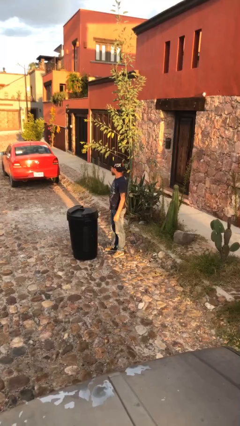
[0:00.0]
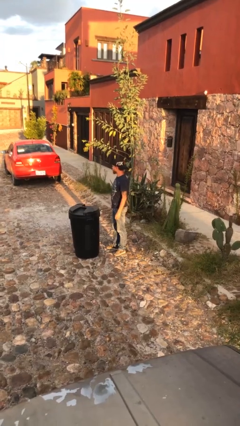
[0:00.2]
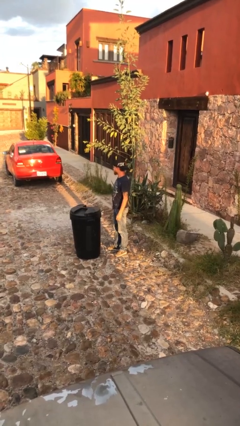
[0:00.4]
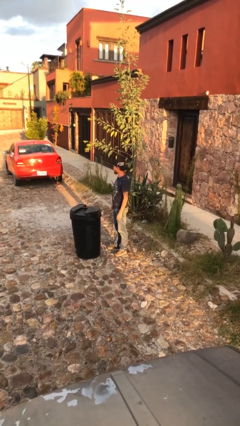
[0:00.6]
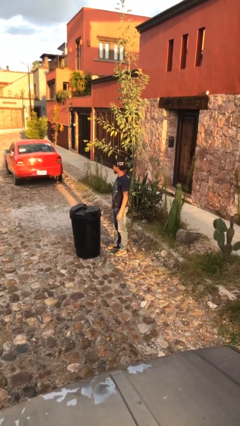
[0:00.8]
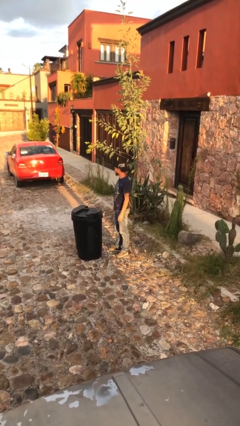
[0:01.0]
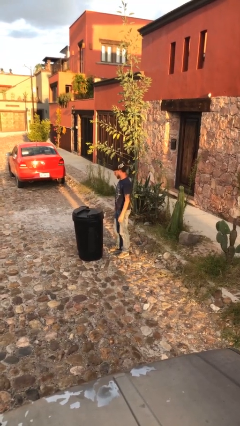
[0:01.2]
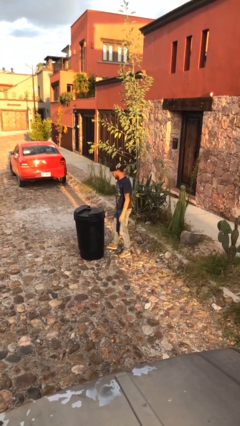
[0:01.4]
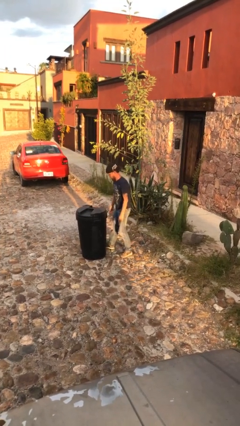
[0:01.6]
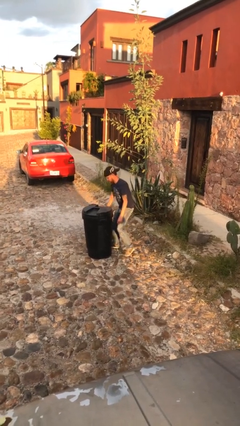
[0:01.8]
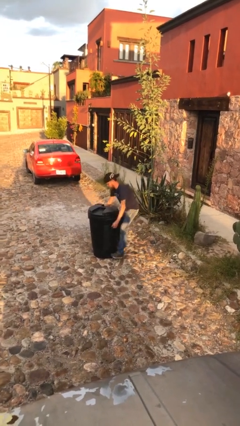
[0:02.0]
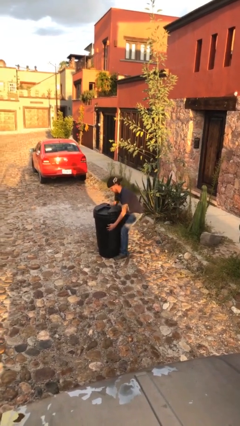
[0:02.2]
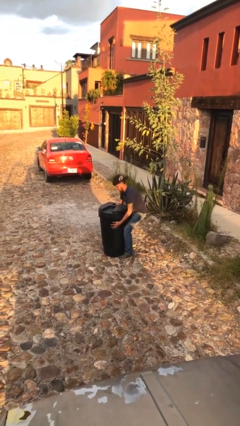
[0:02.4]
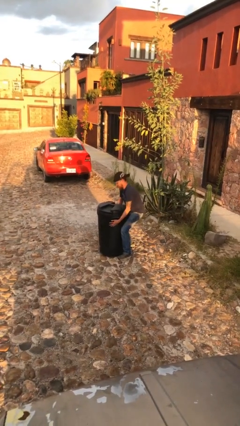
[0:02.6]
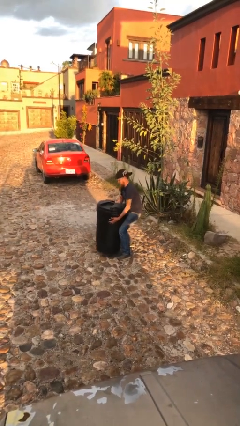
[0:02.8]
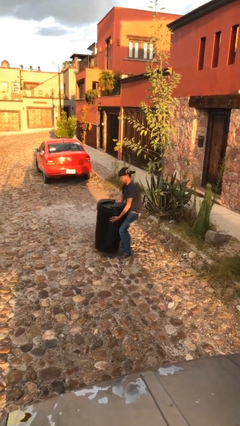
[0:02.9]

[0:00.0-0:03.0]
person picks up object from floor

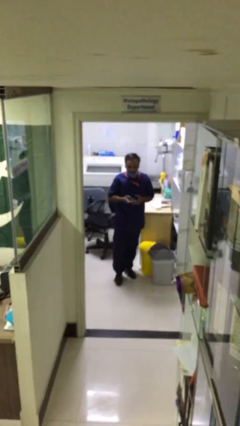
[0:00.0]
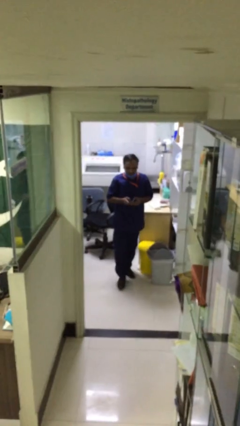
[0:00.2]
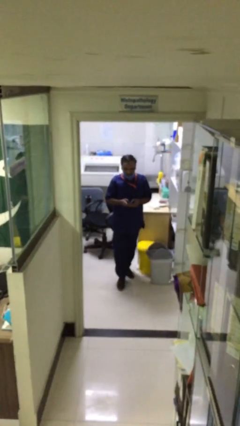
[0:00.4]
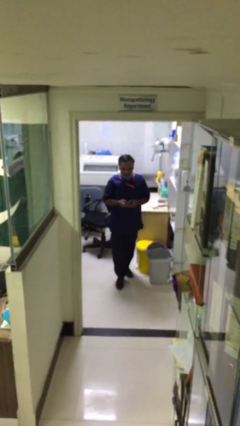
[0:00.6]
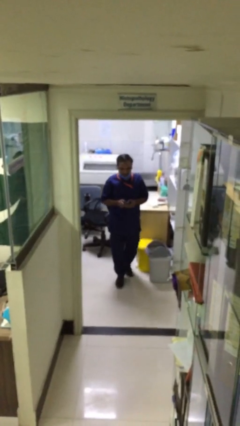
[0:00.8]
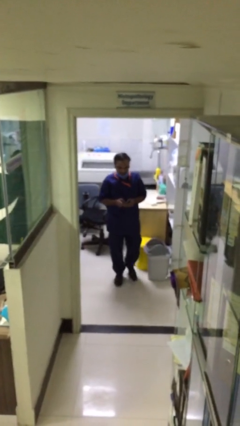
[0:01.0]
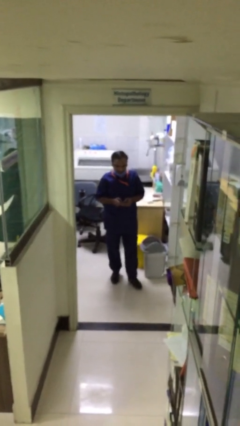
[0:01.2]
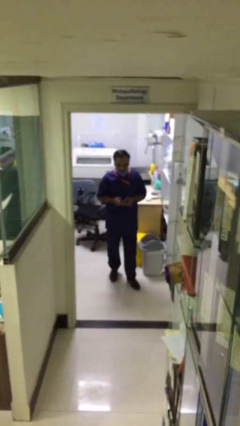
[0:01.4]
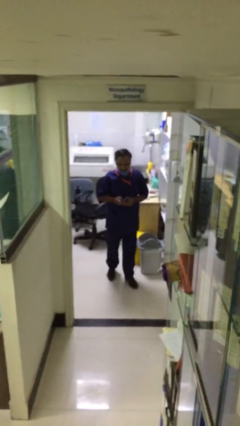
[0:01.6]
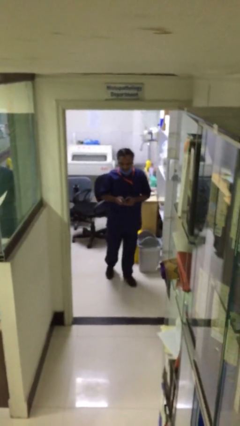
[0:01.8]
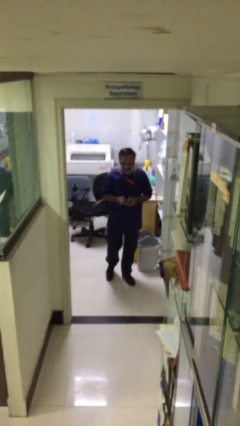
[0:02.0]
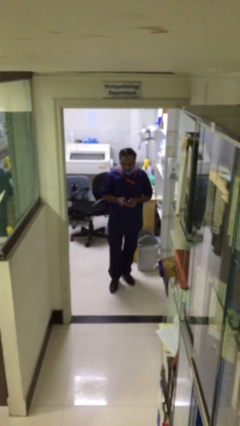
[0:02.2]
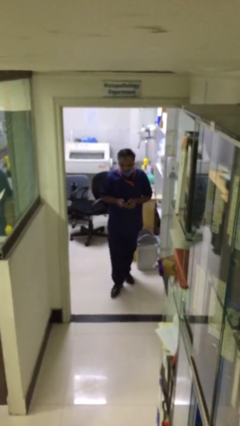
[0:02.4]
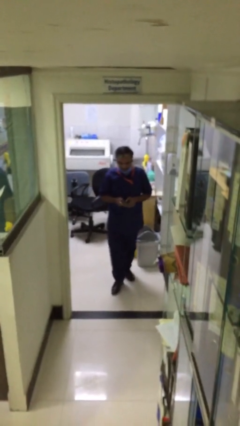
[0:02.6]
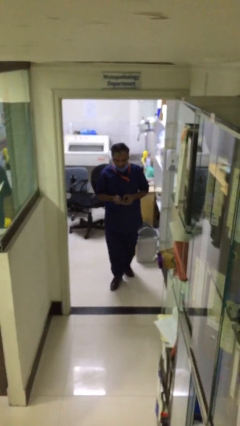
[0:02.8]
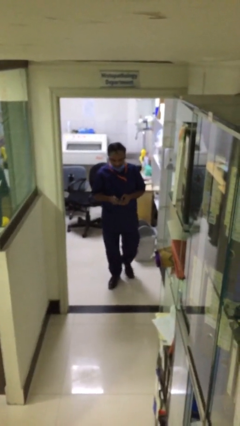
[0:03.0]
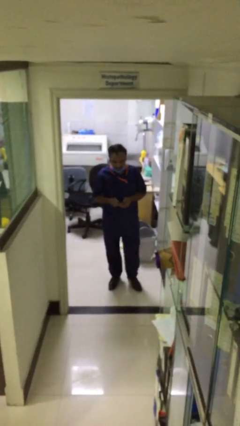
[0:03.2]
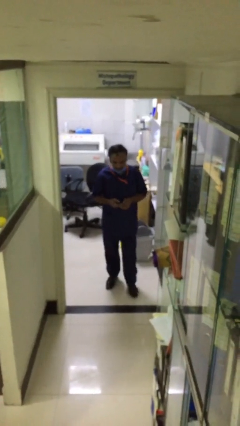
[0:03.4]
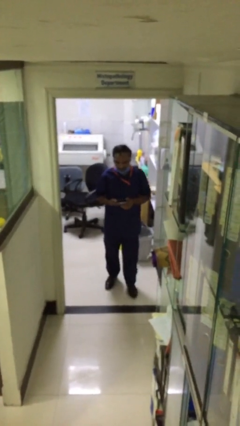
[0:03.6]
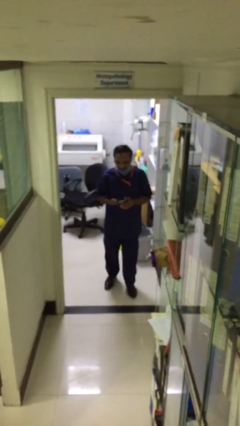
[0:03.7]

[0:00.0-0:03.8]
person texts on phone

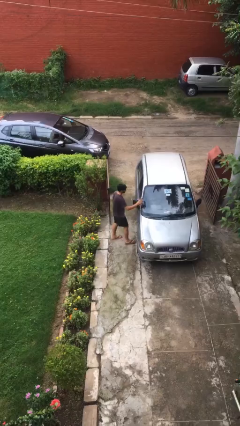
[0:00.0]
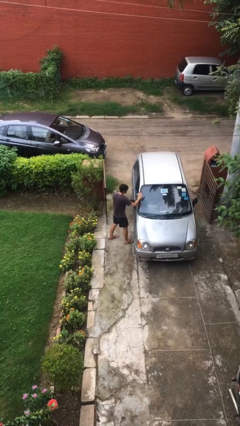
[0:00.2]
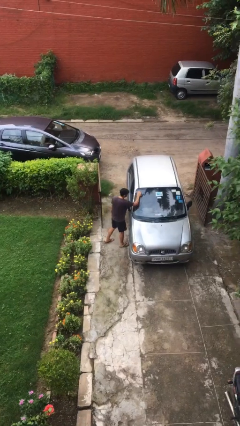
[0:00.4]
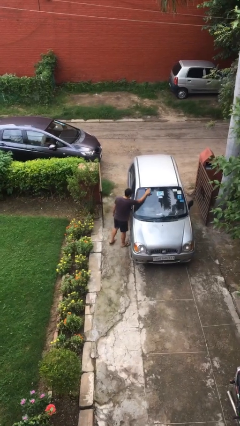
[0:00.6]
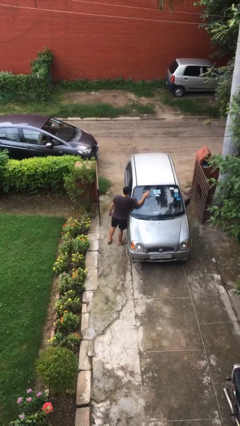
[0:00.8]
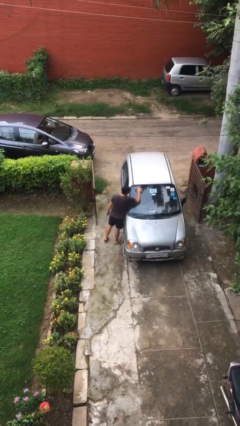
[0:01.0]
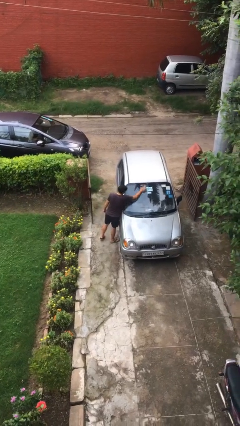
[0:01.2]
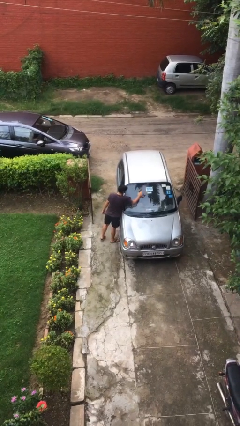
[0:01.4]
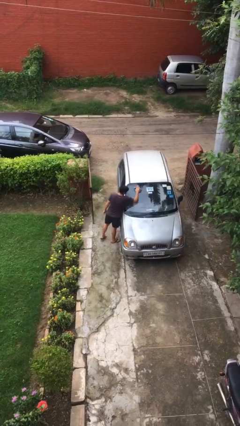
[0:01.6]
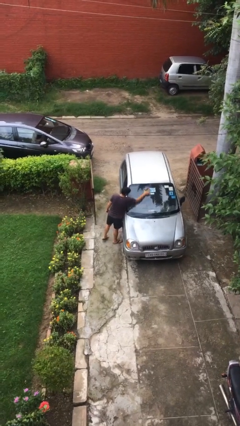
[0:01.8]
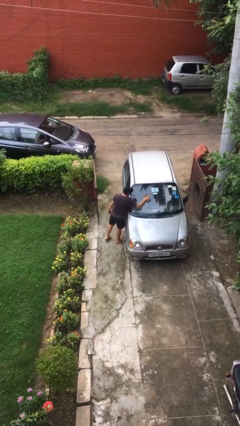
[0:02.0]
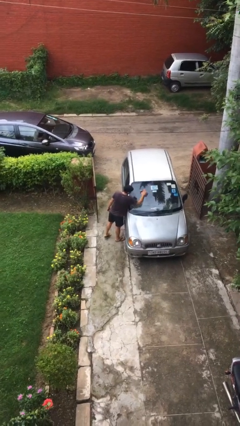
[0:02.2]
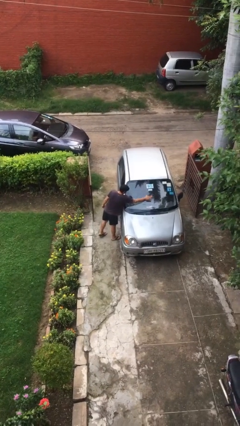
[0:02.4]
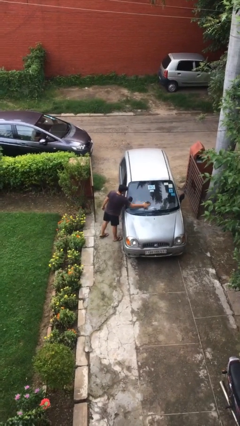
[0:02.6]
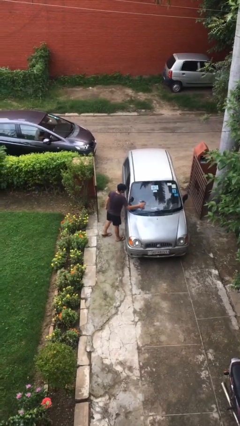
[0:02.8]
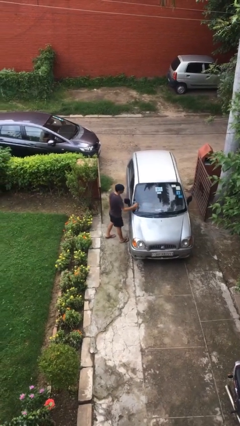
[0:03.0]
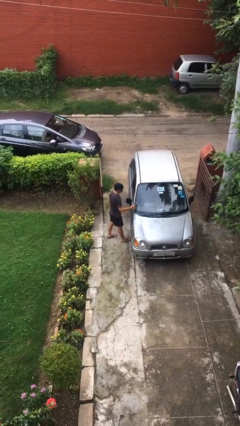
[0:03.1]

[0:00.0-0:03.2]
person polishes car with rag

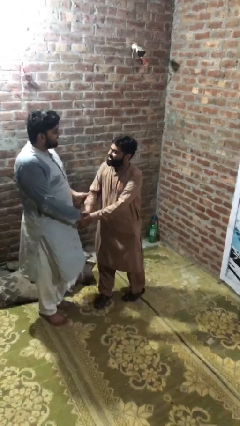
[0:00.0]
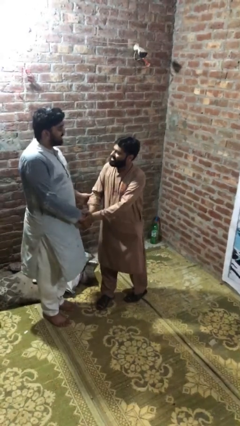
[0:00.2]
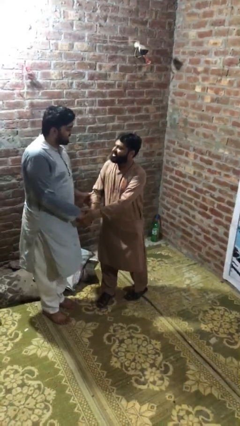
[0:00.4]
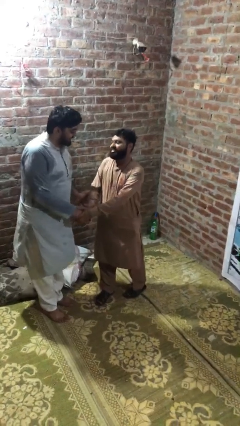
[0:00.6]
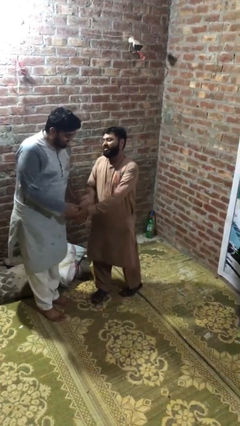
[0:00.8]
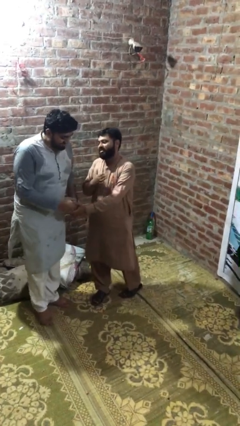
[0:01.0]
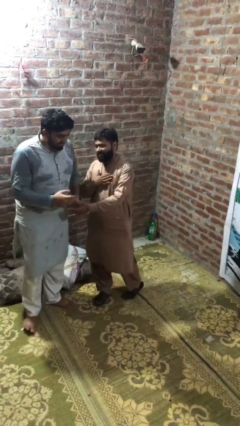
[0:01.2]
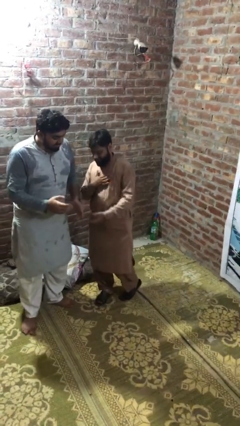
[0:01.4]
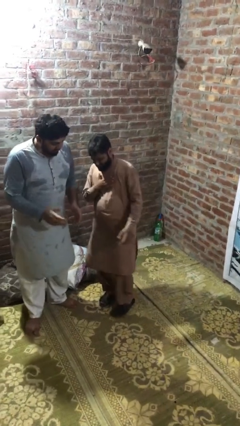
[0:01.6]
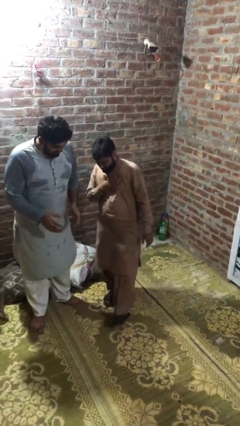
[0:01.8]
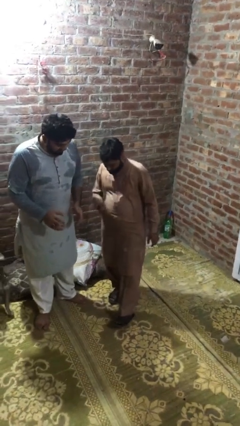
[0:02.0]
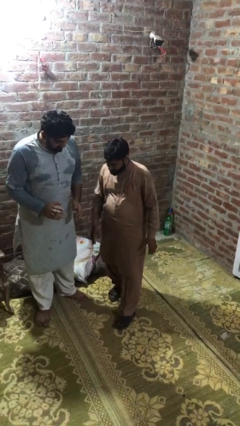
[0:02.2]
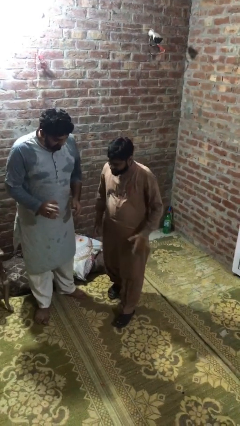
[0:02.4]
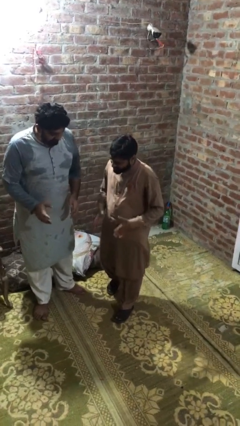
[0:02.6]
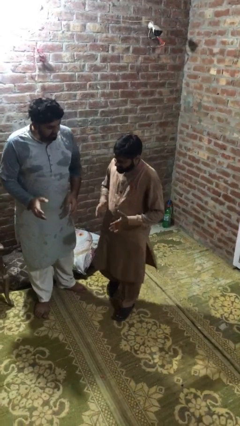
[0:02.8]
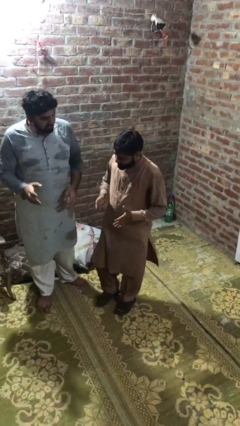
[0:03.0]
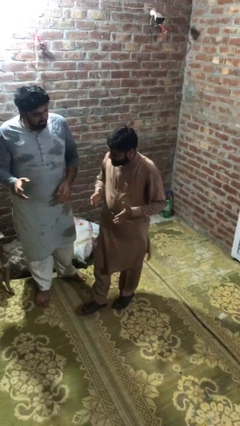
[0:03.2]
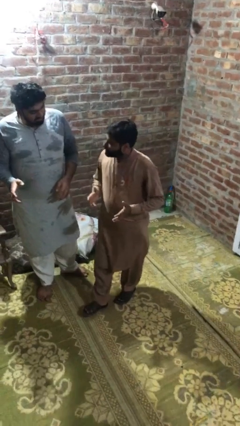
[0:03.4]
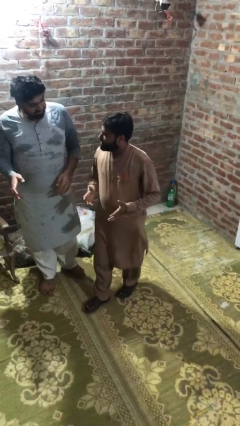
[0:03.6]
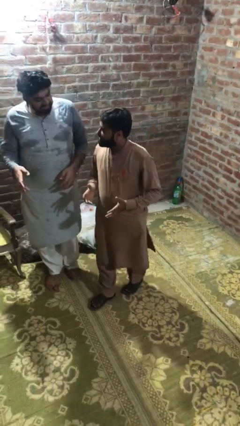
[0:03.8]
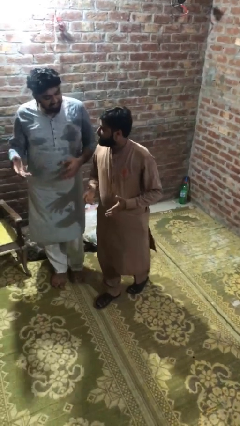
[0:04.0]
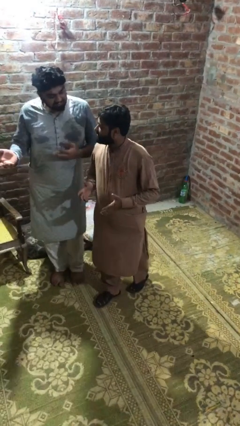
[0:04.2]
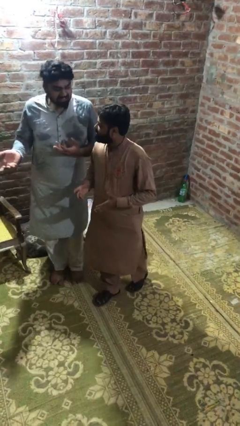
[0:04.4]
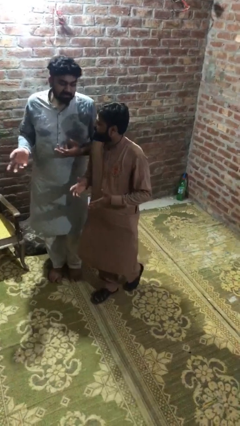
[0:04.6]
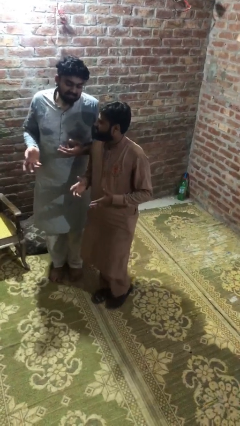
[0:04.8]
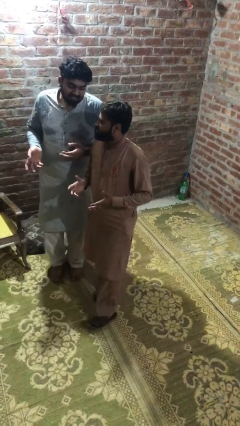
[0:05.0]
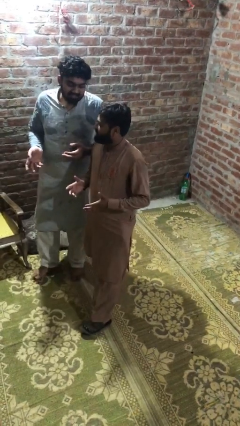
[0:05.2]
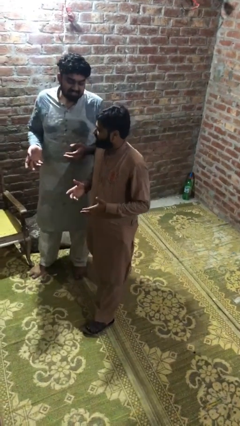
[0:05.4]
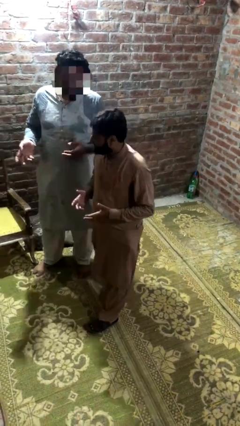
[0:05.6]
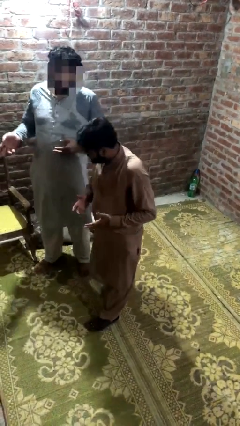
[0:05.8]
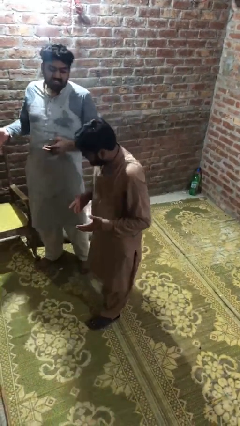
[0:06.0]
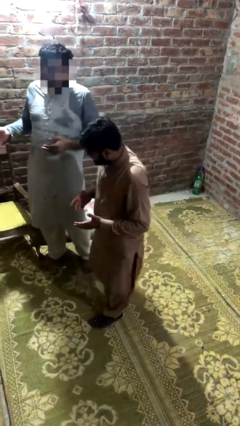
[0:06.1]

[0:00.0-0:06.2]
person talks to person

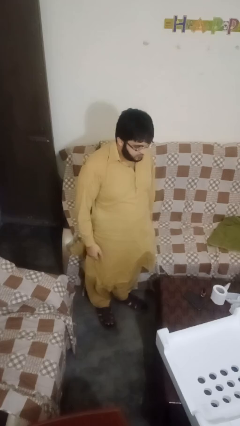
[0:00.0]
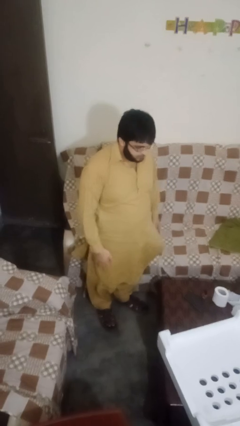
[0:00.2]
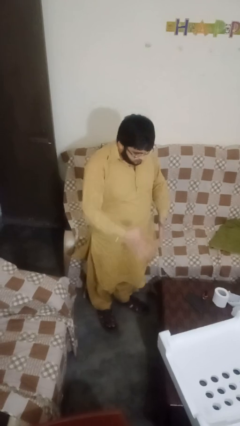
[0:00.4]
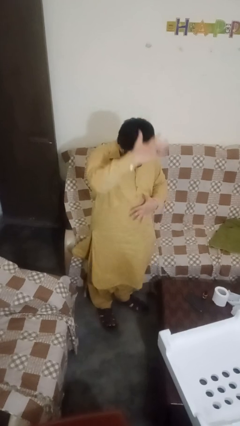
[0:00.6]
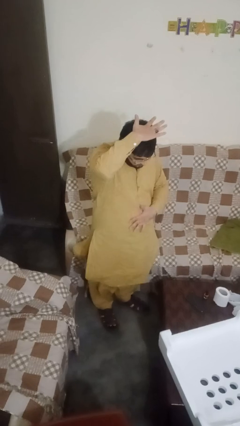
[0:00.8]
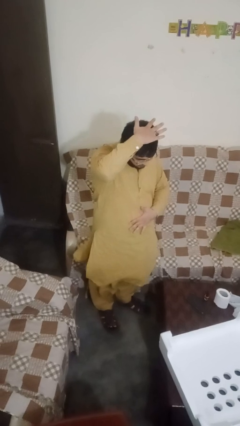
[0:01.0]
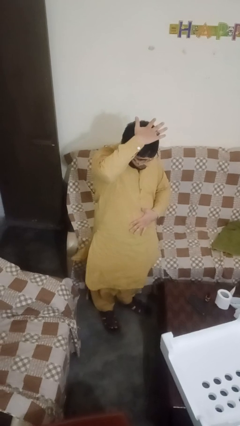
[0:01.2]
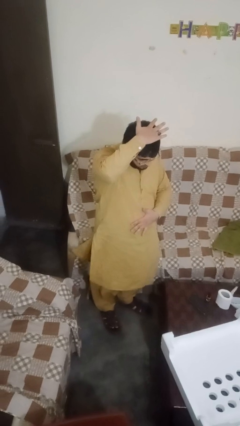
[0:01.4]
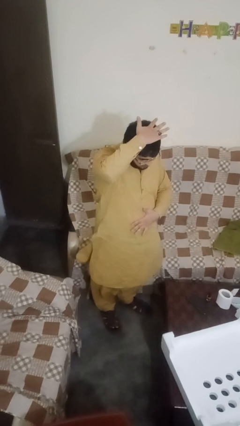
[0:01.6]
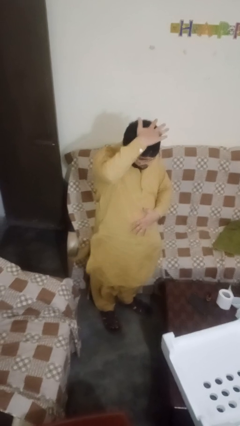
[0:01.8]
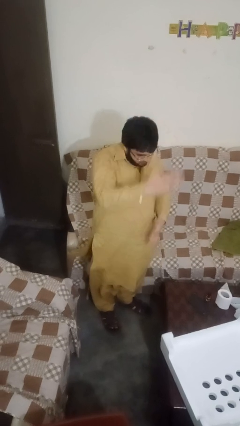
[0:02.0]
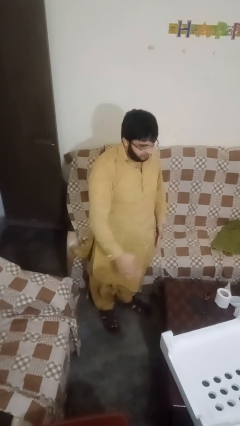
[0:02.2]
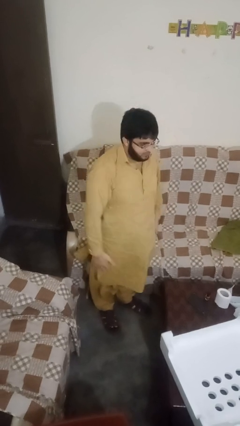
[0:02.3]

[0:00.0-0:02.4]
person pats head
